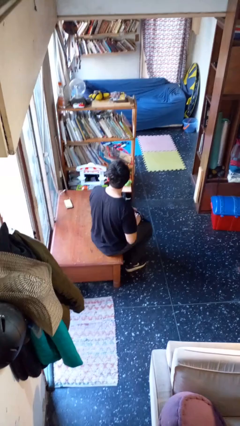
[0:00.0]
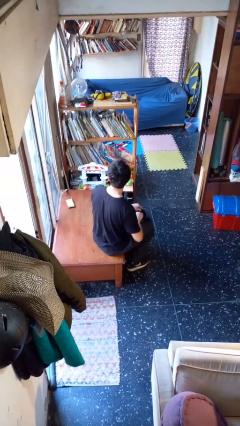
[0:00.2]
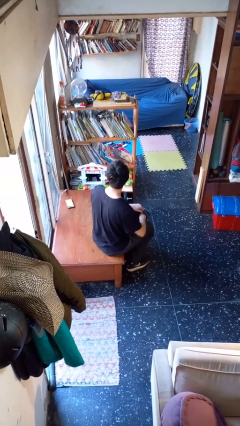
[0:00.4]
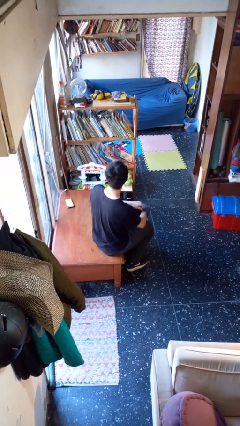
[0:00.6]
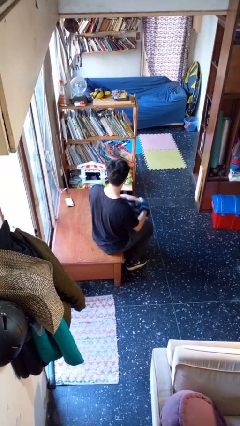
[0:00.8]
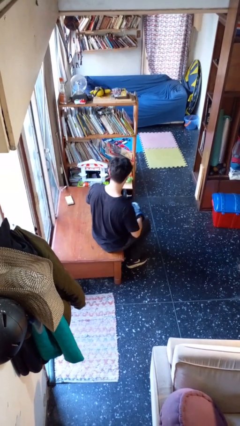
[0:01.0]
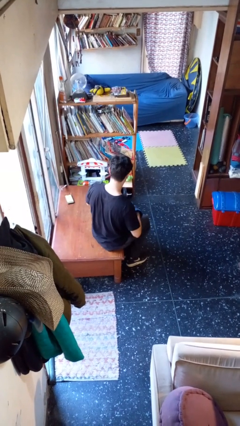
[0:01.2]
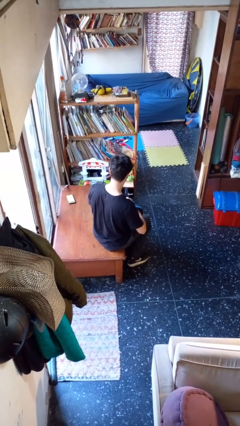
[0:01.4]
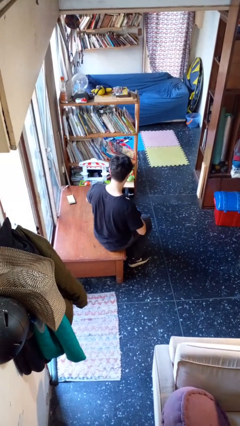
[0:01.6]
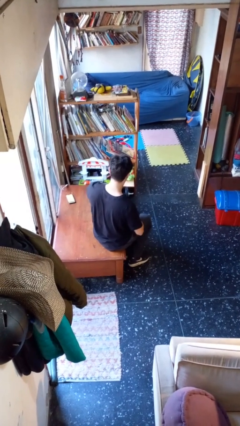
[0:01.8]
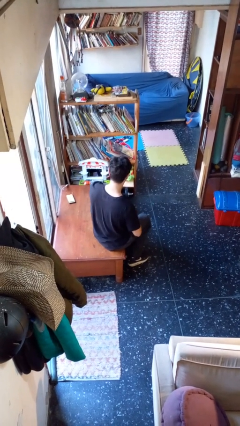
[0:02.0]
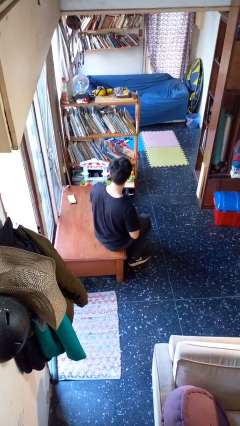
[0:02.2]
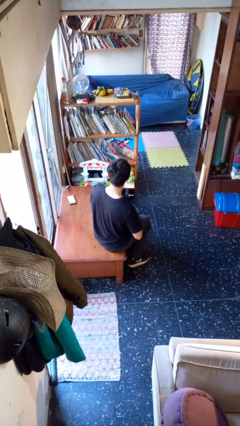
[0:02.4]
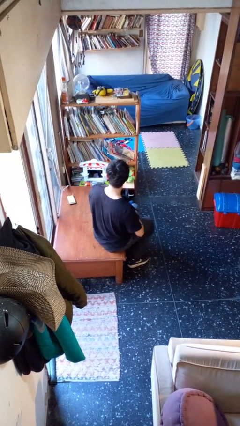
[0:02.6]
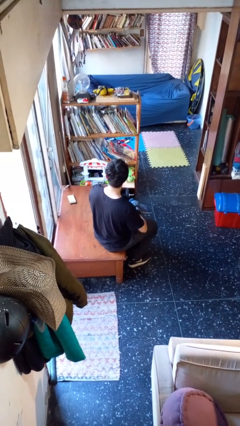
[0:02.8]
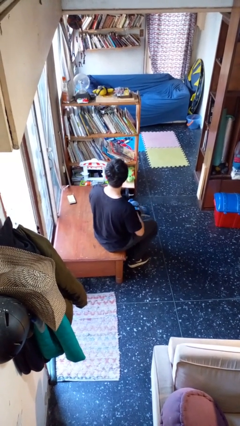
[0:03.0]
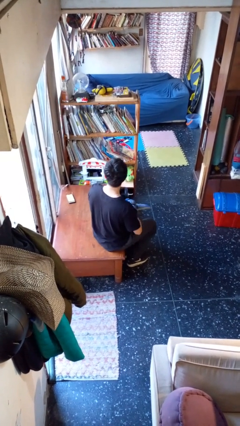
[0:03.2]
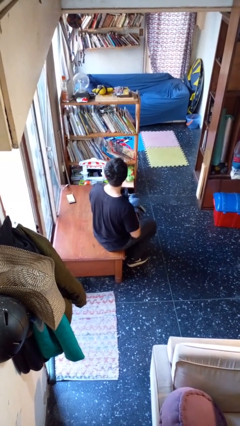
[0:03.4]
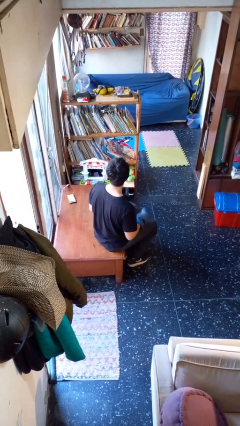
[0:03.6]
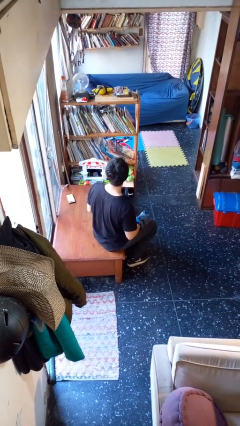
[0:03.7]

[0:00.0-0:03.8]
person puts on gloves

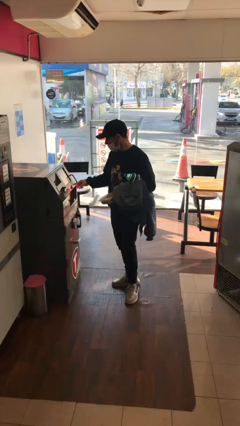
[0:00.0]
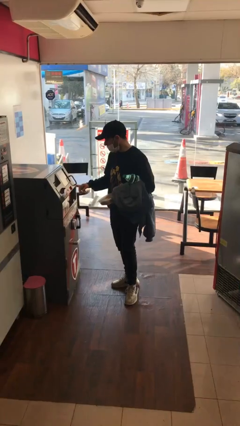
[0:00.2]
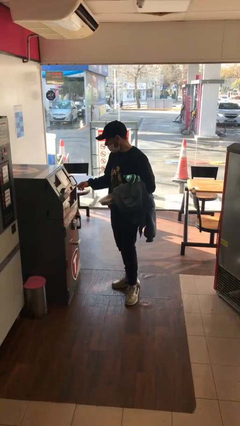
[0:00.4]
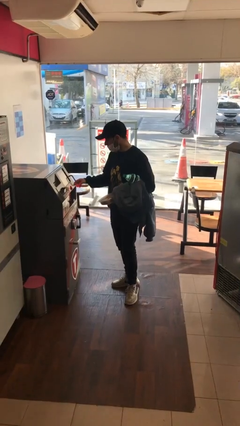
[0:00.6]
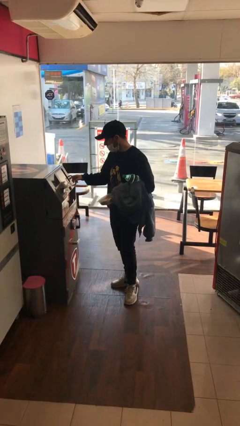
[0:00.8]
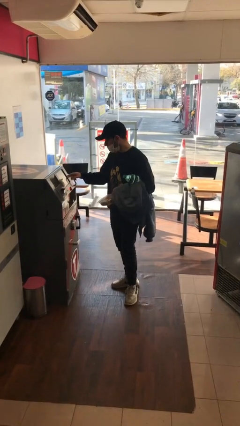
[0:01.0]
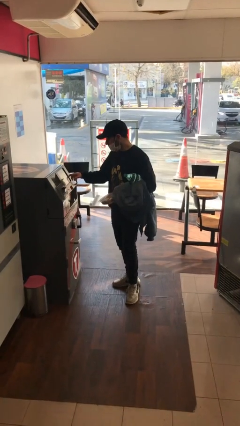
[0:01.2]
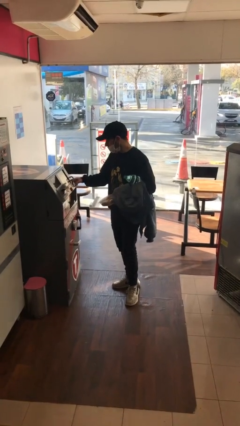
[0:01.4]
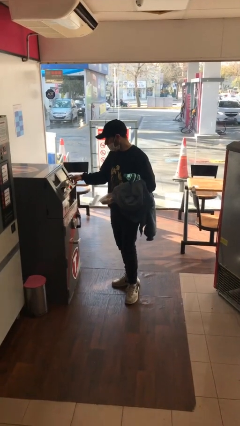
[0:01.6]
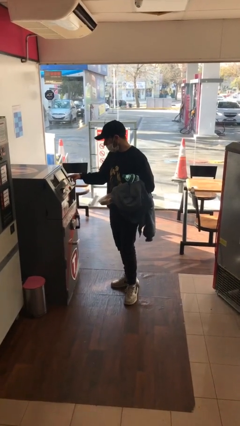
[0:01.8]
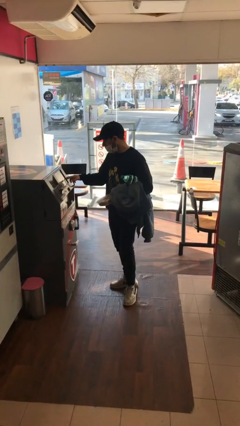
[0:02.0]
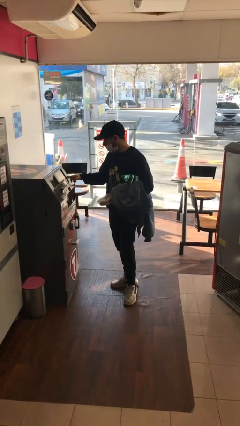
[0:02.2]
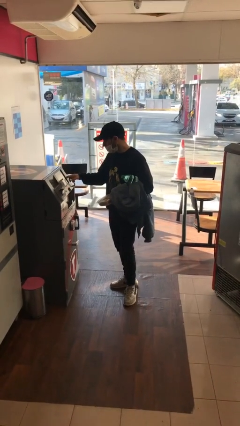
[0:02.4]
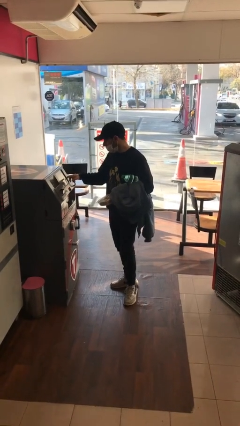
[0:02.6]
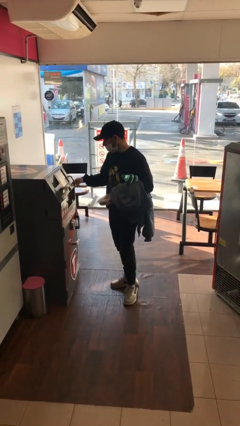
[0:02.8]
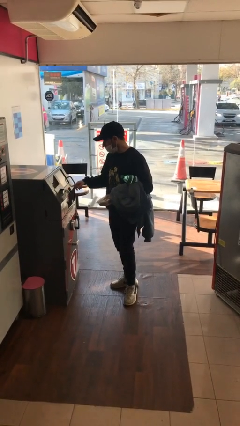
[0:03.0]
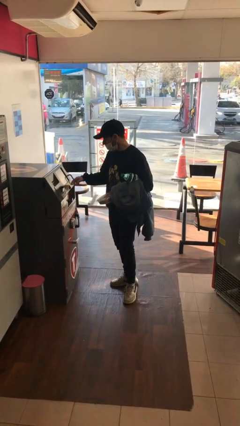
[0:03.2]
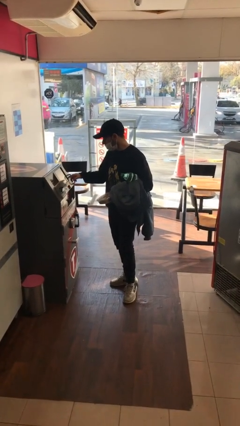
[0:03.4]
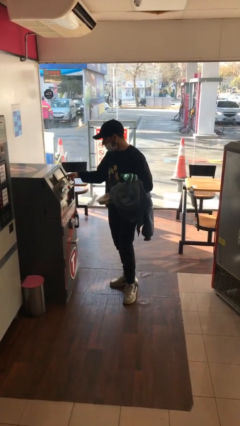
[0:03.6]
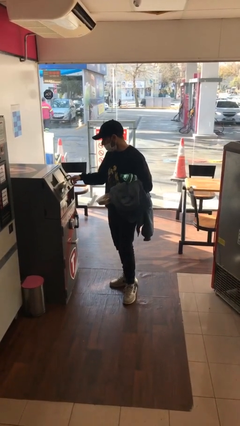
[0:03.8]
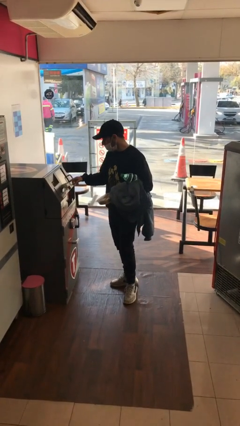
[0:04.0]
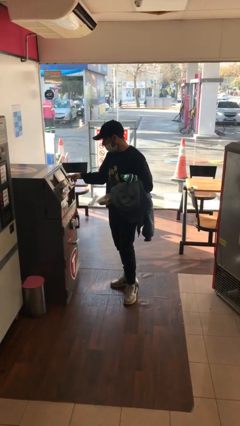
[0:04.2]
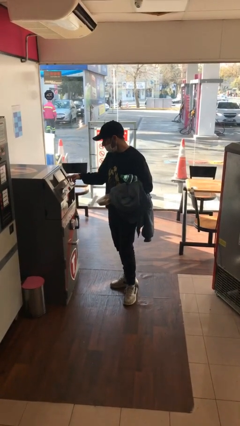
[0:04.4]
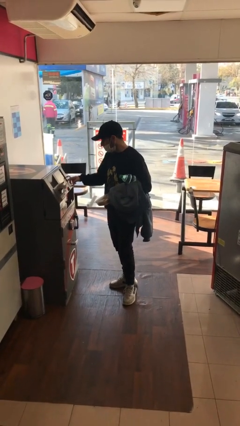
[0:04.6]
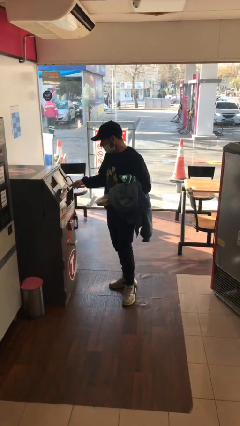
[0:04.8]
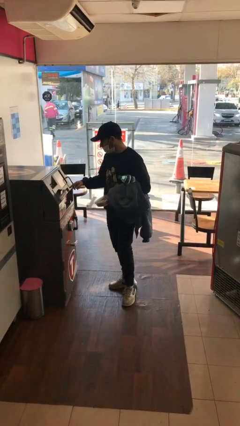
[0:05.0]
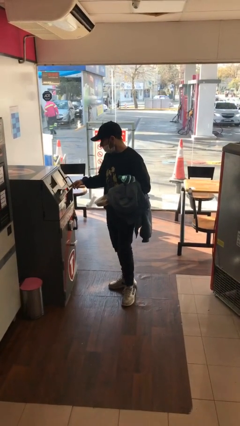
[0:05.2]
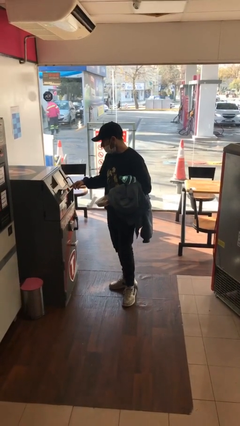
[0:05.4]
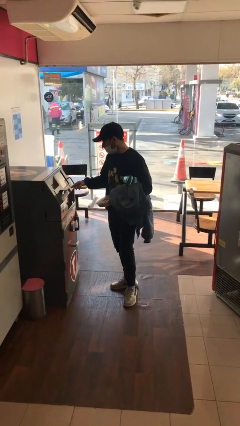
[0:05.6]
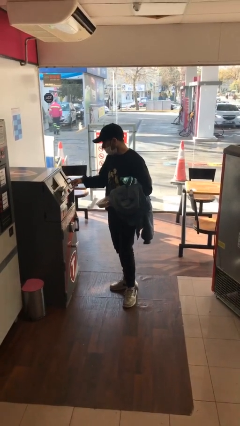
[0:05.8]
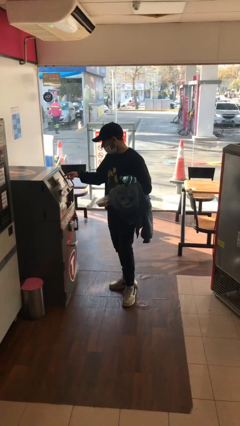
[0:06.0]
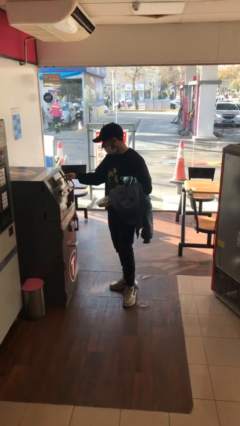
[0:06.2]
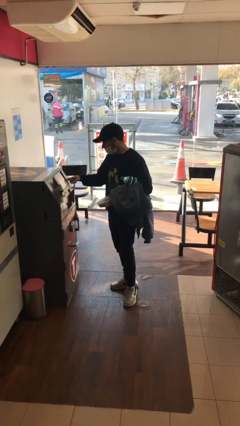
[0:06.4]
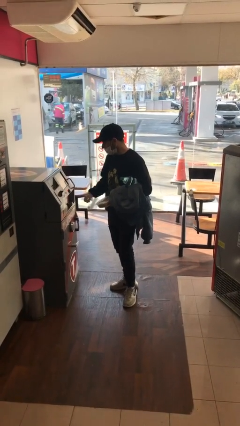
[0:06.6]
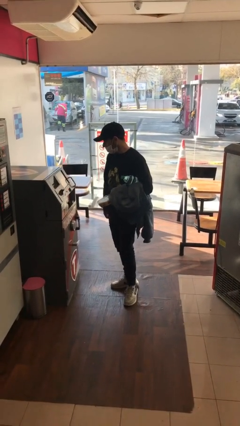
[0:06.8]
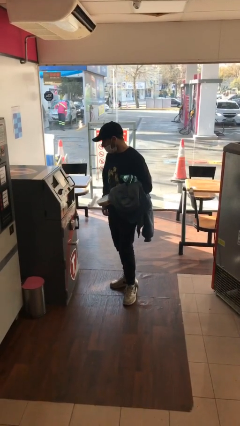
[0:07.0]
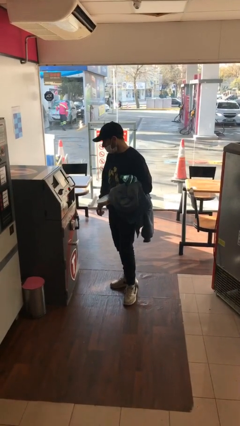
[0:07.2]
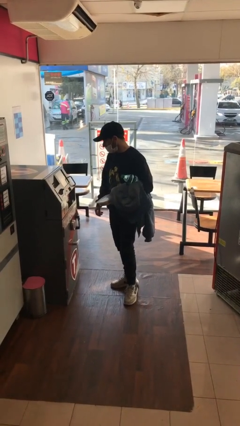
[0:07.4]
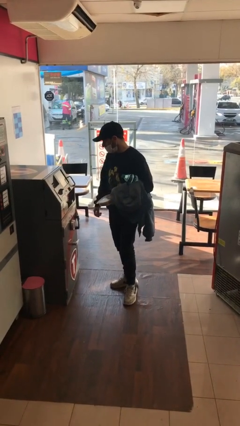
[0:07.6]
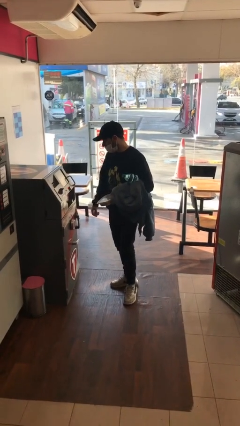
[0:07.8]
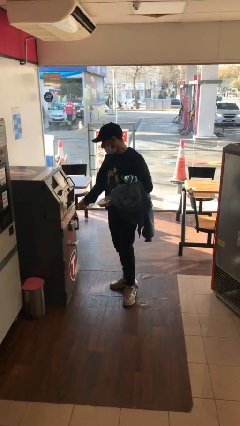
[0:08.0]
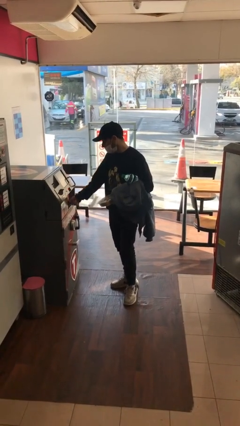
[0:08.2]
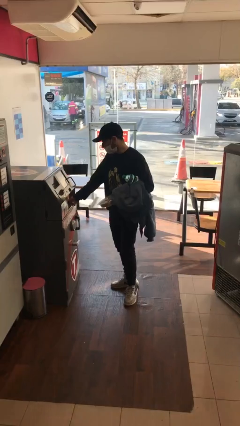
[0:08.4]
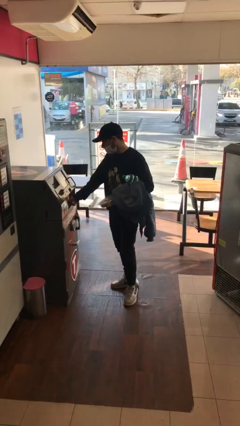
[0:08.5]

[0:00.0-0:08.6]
person purchases from machine

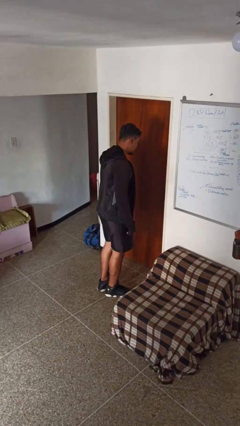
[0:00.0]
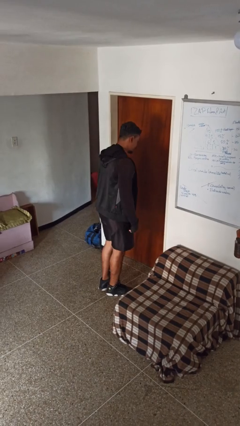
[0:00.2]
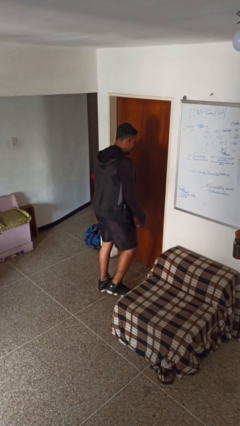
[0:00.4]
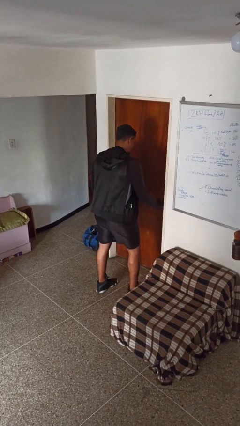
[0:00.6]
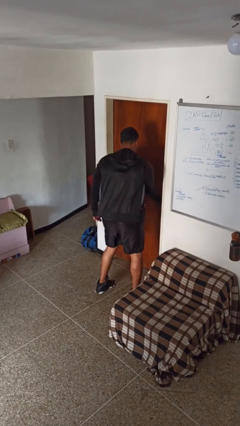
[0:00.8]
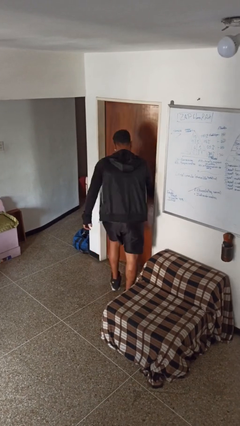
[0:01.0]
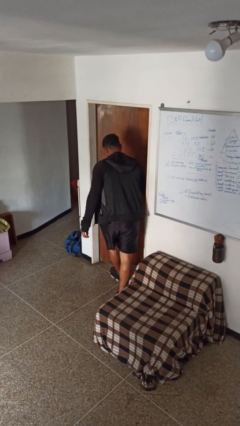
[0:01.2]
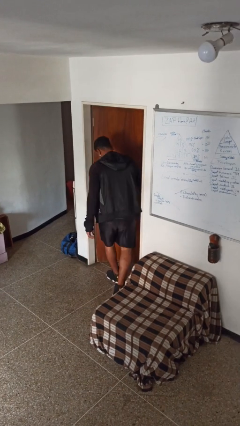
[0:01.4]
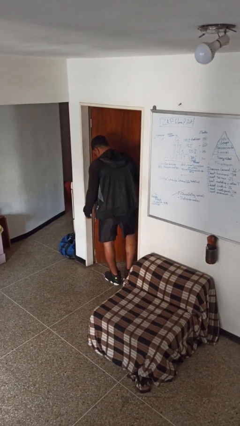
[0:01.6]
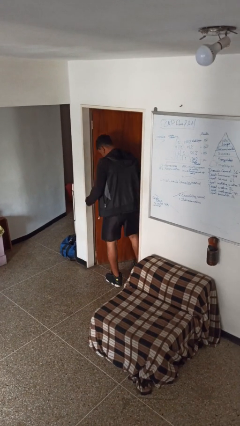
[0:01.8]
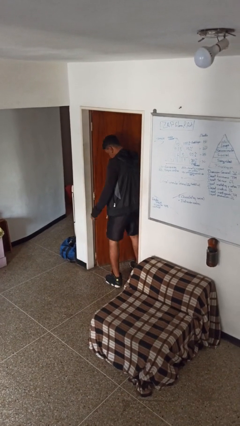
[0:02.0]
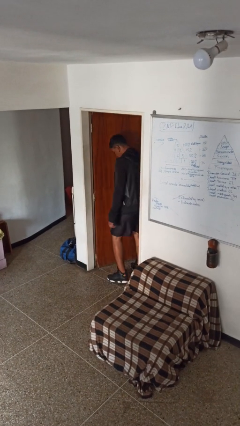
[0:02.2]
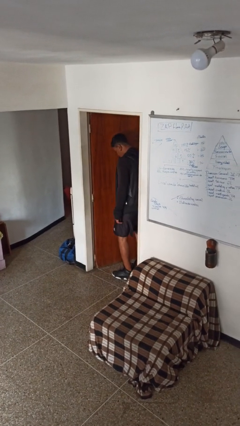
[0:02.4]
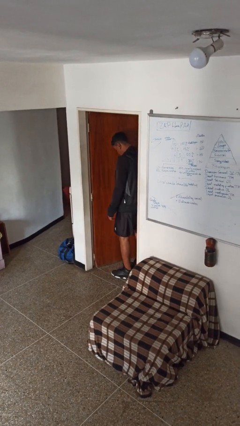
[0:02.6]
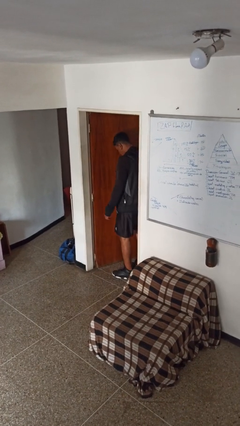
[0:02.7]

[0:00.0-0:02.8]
person opens facility door

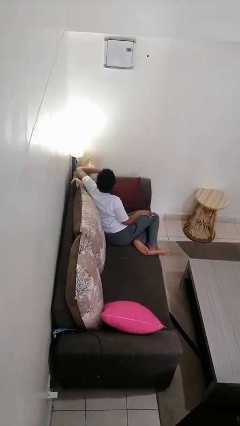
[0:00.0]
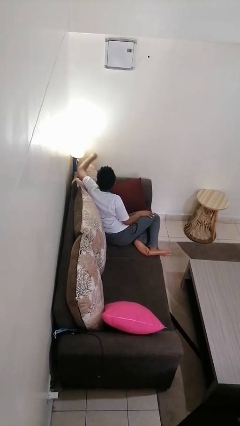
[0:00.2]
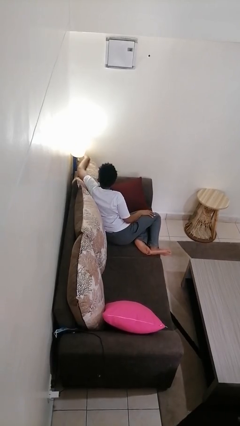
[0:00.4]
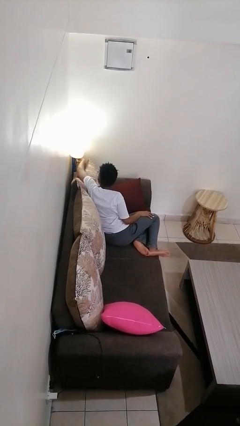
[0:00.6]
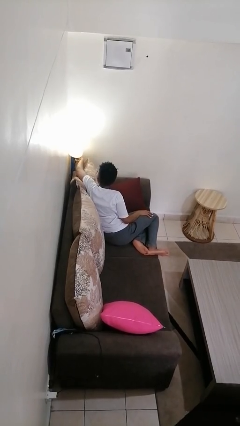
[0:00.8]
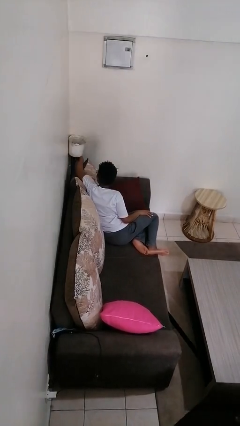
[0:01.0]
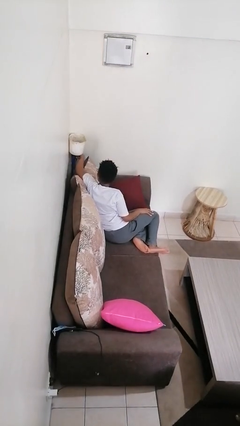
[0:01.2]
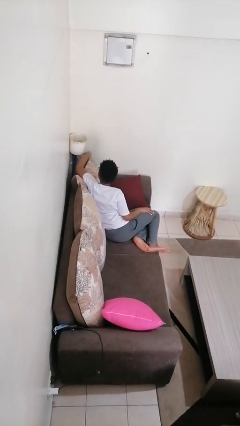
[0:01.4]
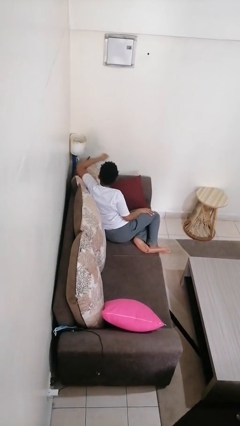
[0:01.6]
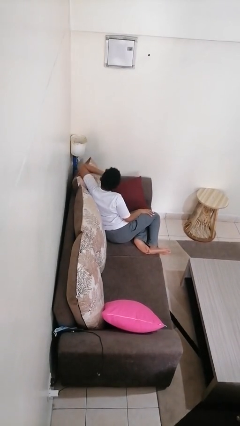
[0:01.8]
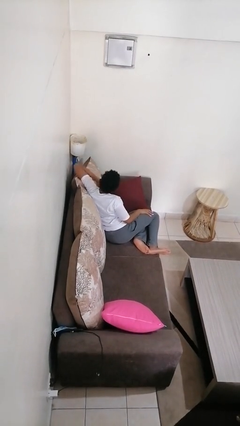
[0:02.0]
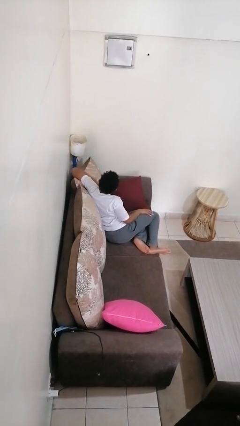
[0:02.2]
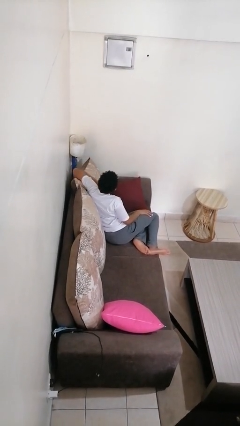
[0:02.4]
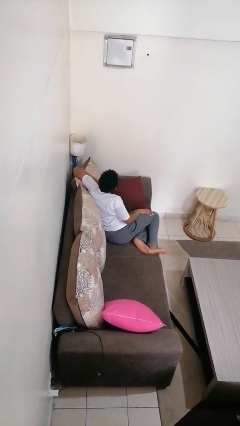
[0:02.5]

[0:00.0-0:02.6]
person turns off lamp
